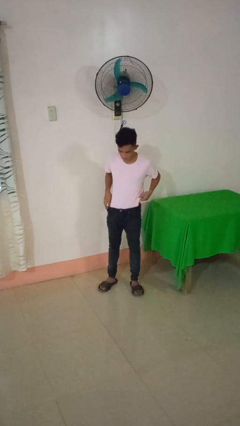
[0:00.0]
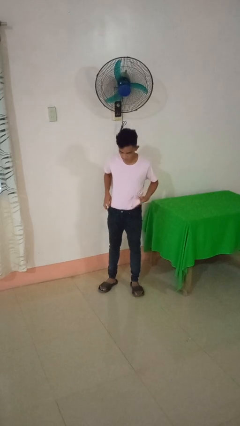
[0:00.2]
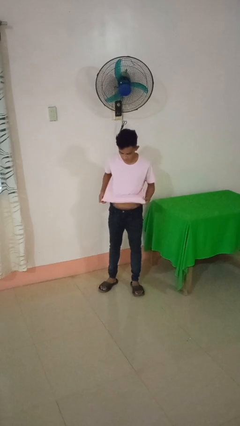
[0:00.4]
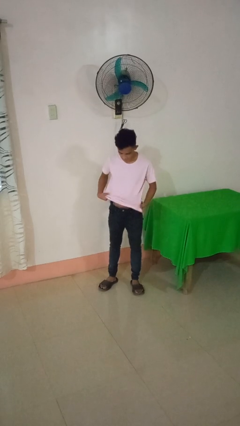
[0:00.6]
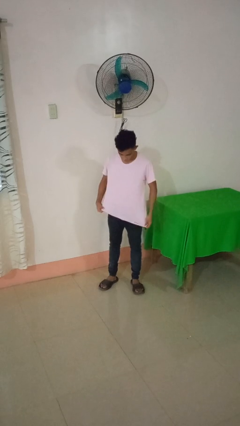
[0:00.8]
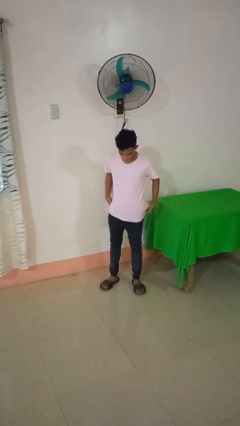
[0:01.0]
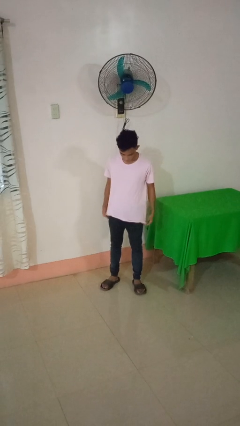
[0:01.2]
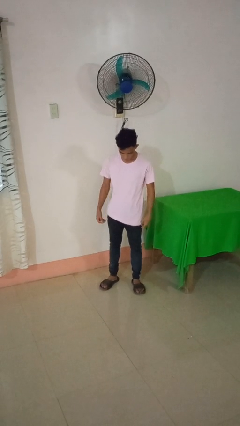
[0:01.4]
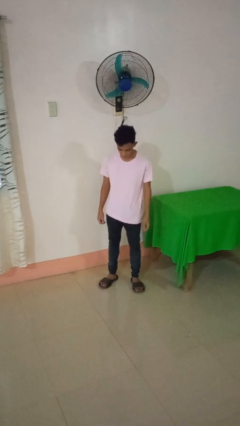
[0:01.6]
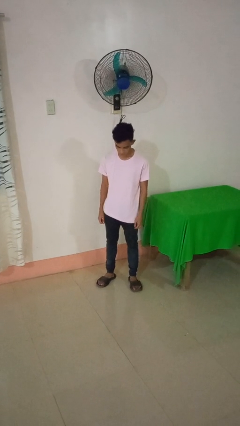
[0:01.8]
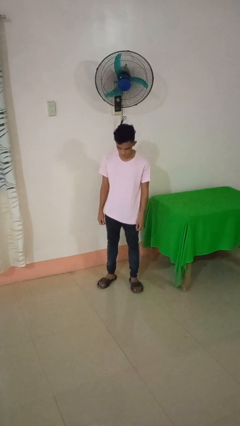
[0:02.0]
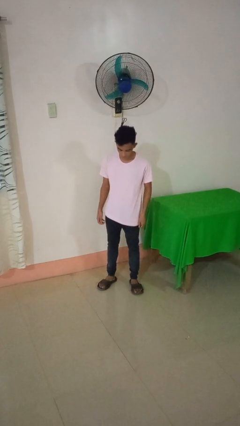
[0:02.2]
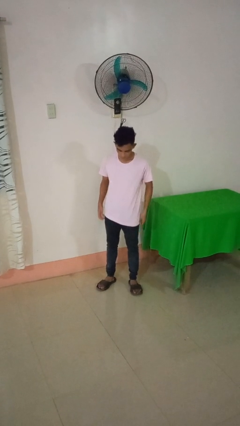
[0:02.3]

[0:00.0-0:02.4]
person untucks shirt

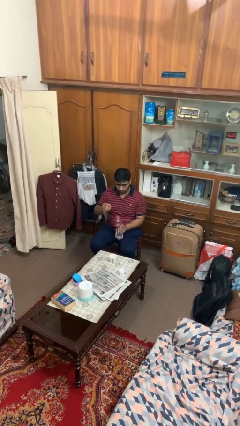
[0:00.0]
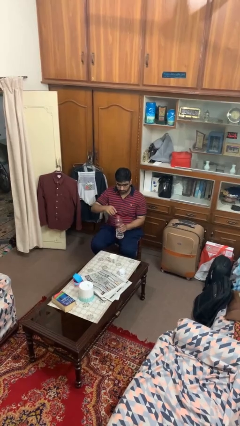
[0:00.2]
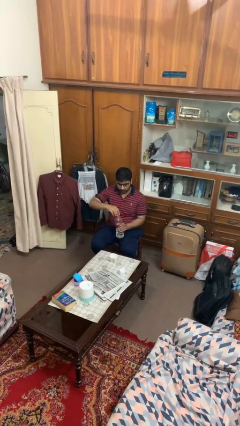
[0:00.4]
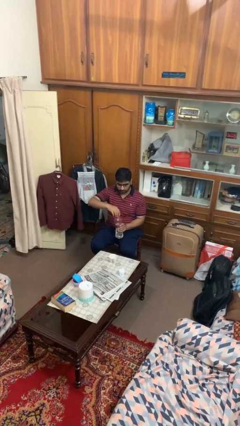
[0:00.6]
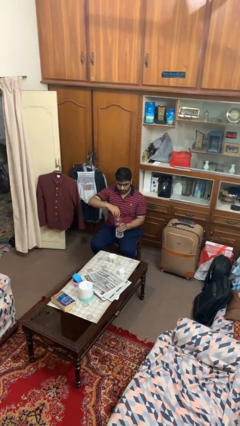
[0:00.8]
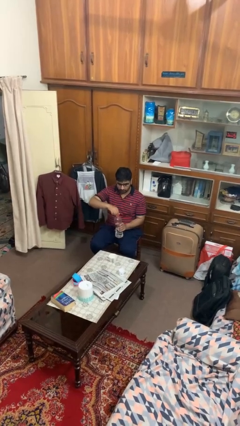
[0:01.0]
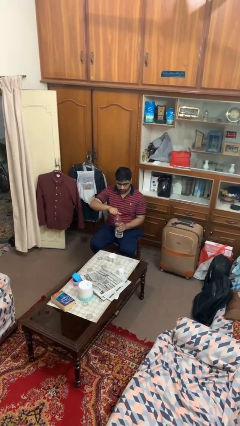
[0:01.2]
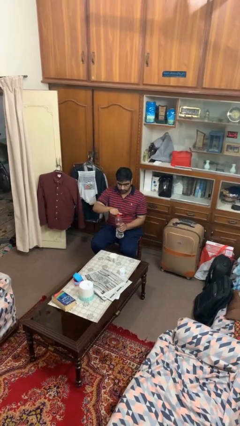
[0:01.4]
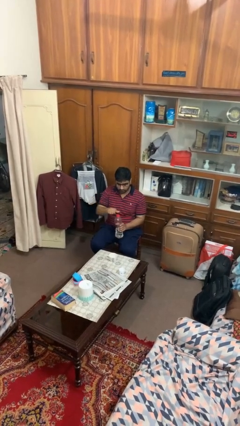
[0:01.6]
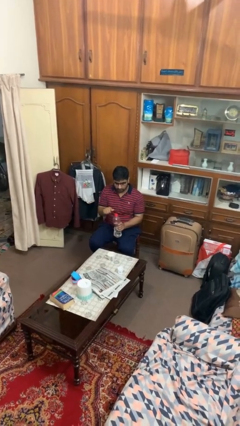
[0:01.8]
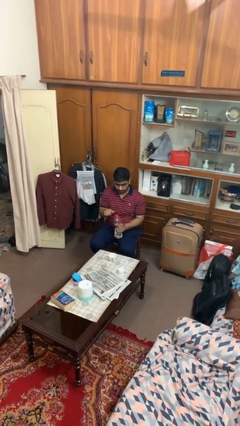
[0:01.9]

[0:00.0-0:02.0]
person screws lid to bottle

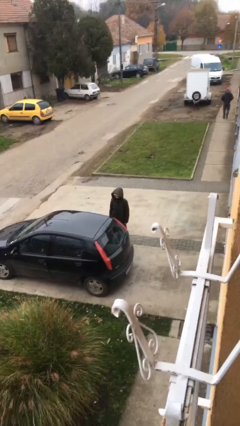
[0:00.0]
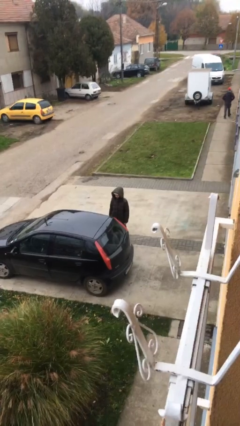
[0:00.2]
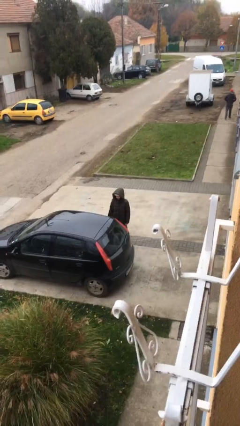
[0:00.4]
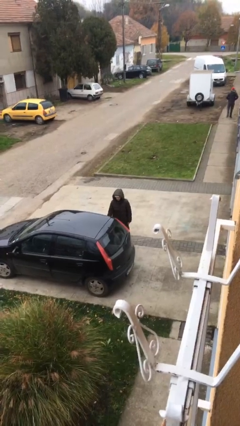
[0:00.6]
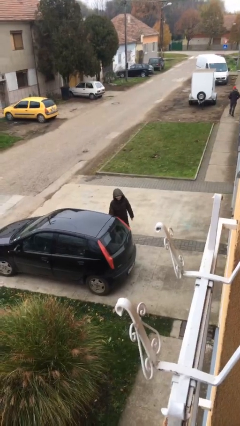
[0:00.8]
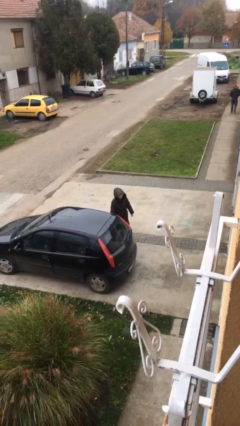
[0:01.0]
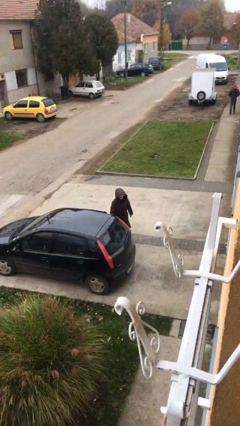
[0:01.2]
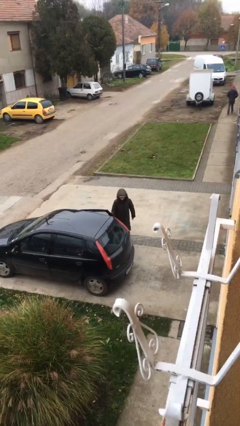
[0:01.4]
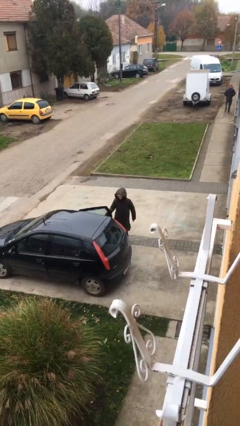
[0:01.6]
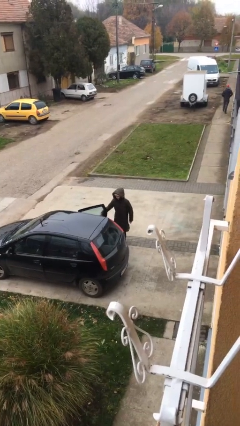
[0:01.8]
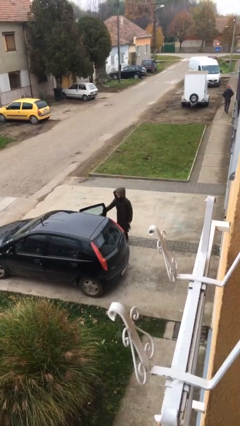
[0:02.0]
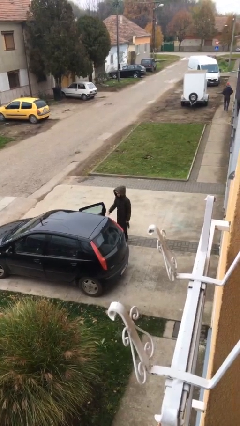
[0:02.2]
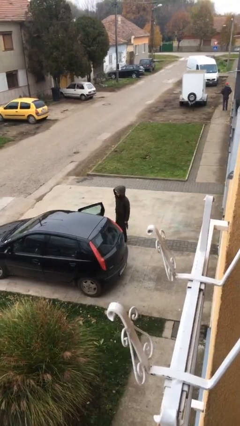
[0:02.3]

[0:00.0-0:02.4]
person opens car door

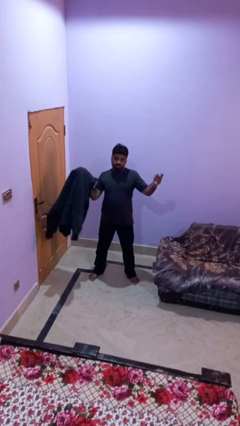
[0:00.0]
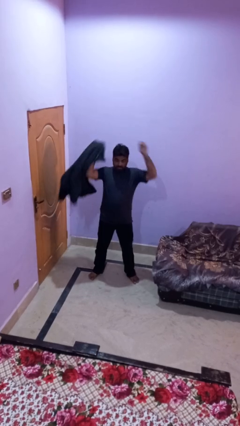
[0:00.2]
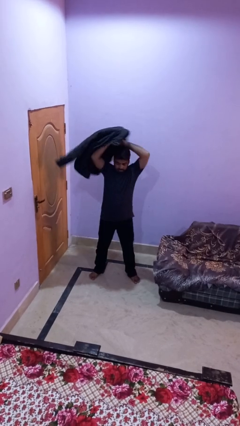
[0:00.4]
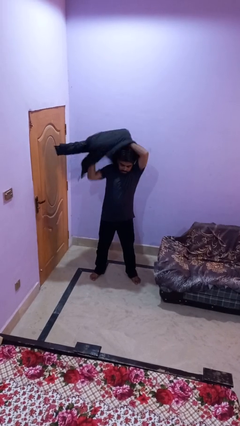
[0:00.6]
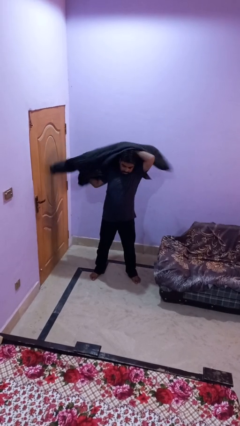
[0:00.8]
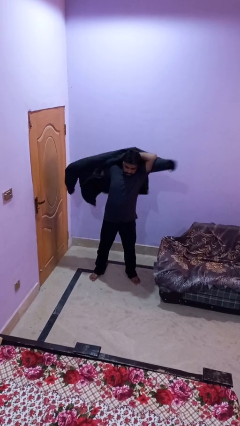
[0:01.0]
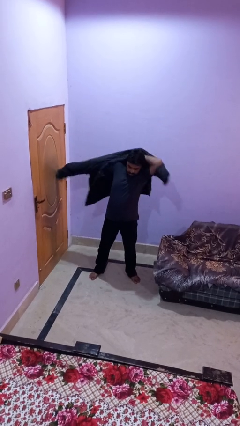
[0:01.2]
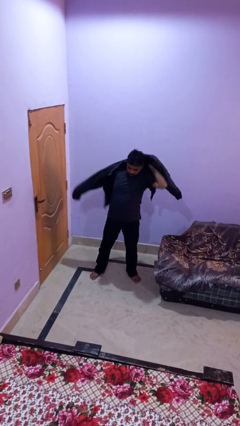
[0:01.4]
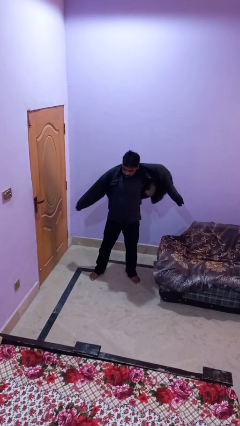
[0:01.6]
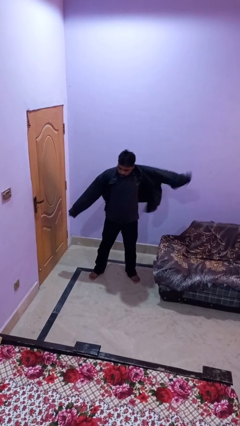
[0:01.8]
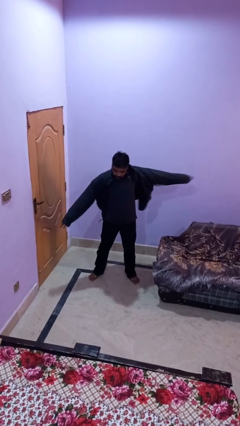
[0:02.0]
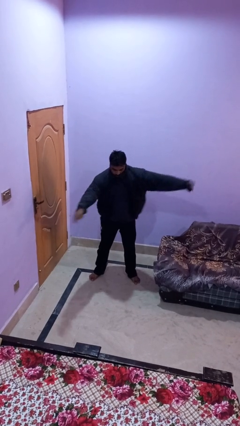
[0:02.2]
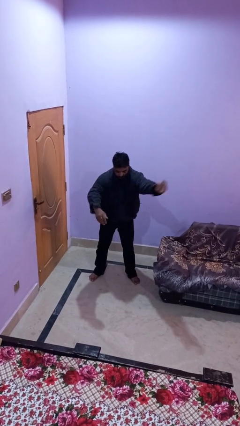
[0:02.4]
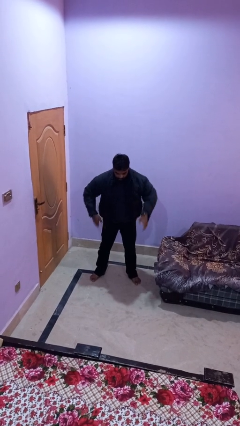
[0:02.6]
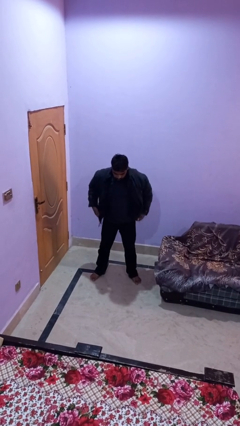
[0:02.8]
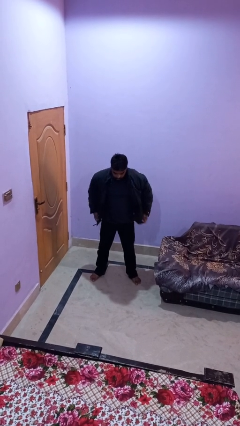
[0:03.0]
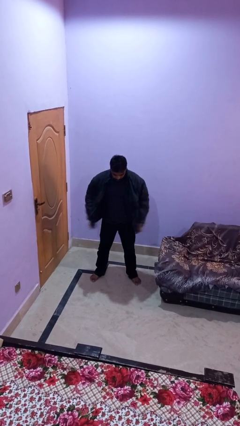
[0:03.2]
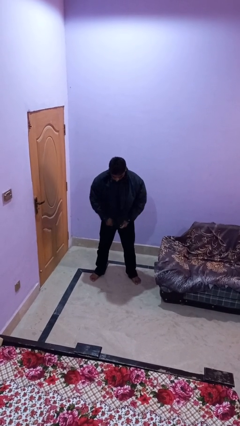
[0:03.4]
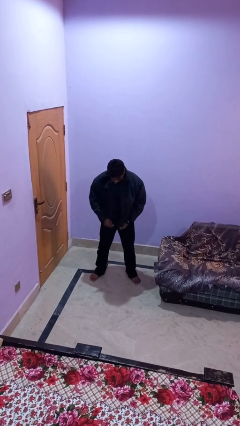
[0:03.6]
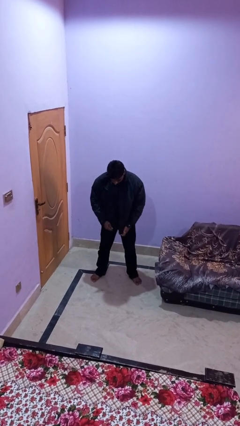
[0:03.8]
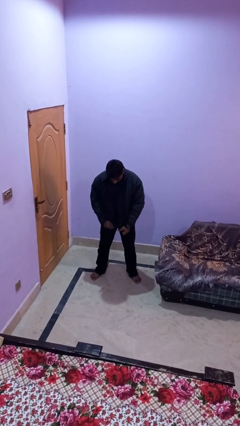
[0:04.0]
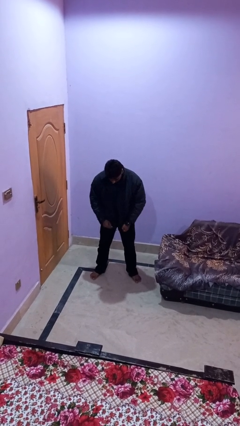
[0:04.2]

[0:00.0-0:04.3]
person puts on jacket

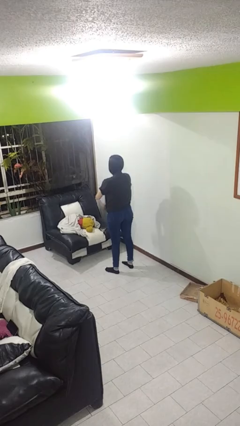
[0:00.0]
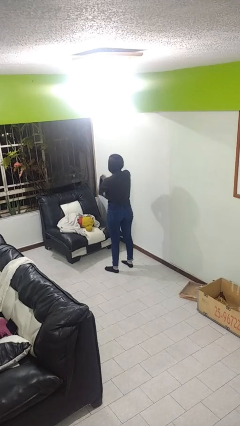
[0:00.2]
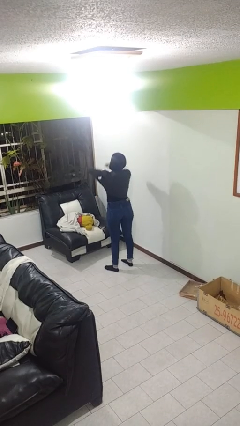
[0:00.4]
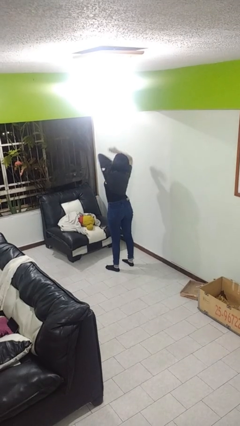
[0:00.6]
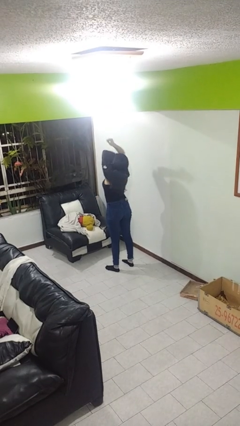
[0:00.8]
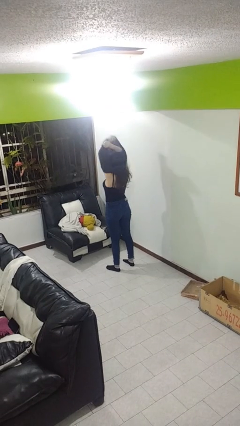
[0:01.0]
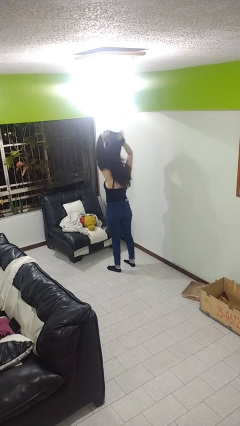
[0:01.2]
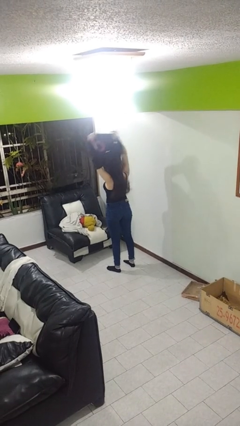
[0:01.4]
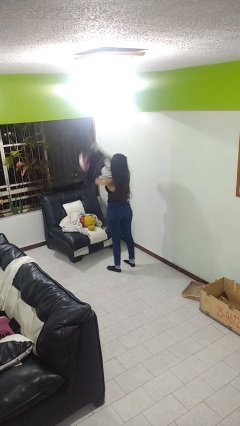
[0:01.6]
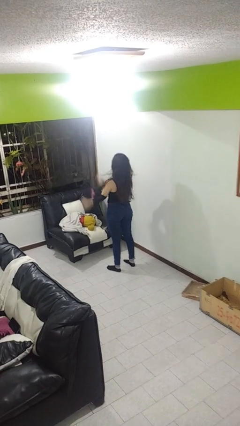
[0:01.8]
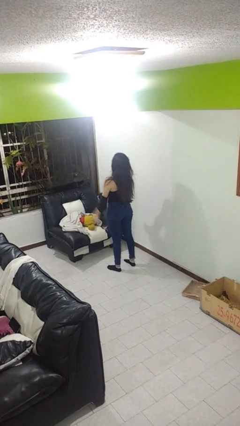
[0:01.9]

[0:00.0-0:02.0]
person takes off shirt

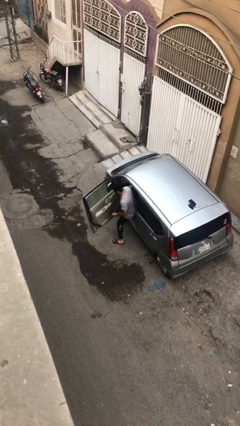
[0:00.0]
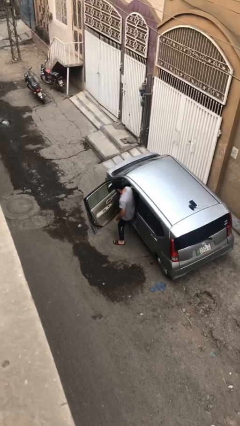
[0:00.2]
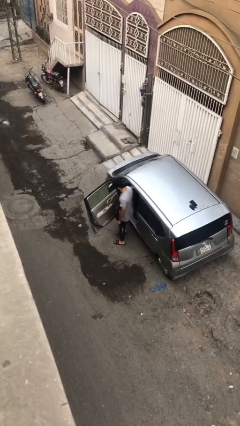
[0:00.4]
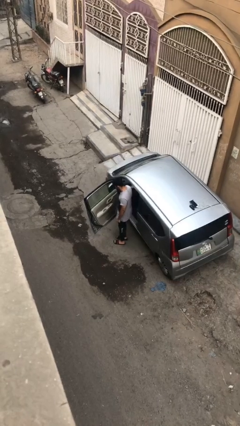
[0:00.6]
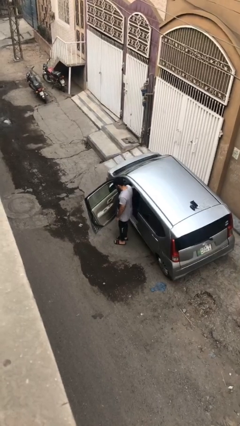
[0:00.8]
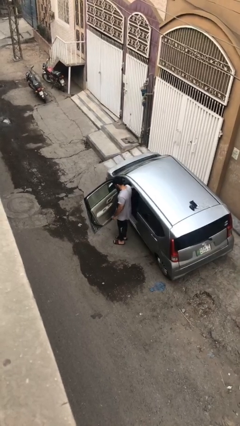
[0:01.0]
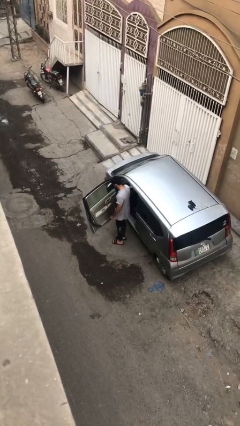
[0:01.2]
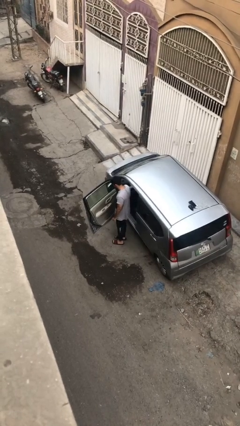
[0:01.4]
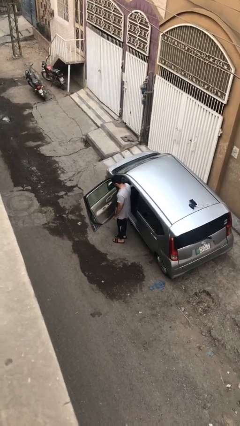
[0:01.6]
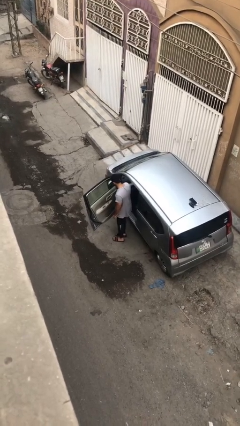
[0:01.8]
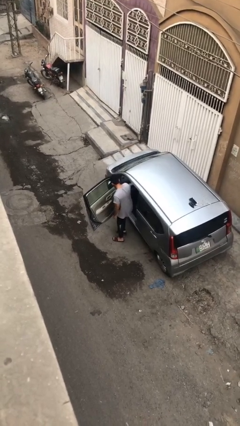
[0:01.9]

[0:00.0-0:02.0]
person exits car

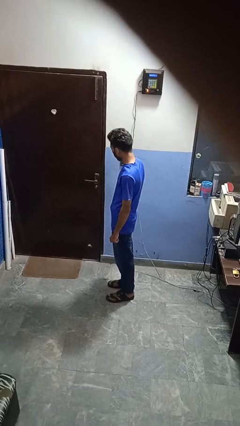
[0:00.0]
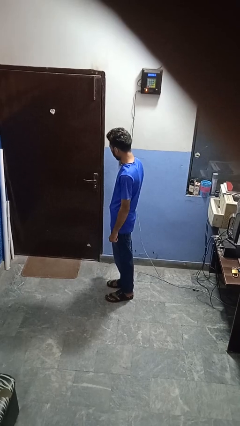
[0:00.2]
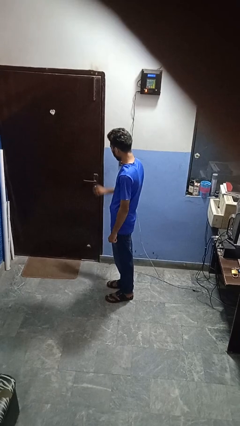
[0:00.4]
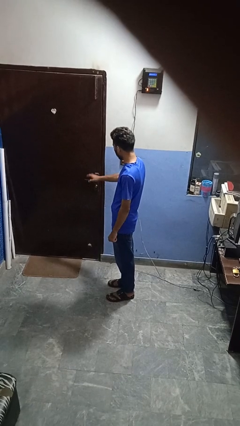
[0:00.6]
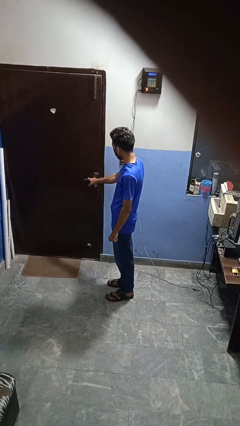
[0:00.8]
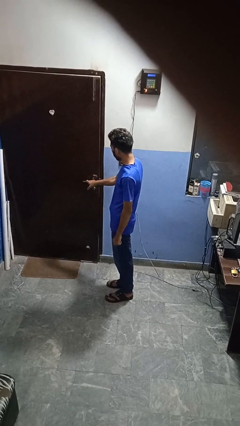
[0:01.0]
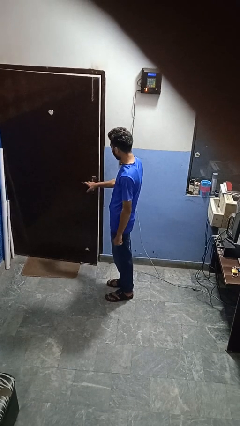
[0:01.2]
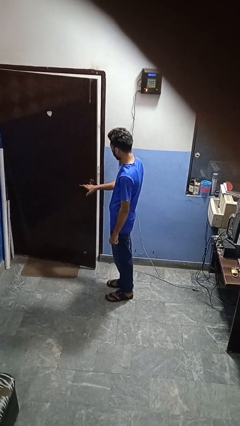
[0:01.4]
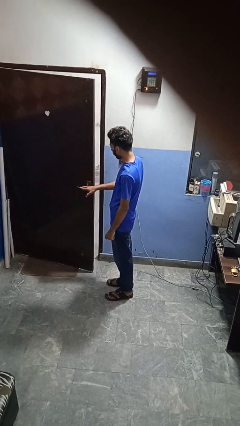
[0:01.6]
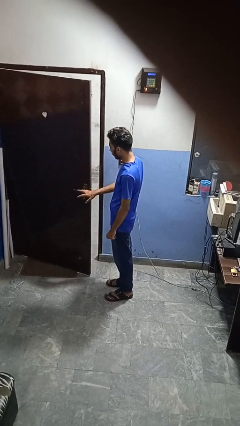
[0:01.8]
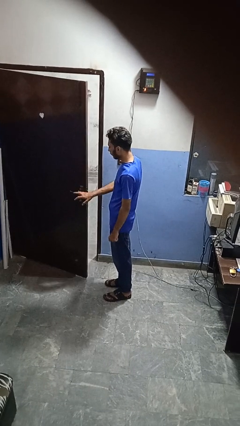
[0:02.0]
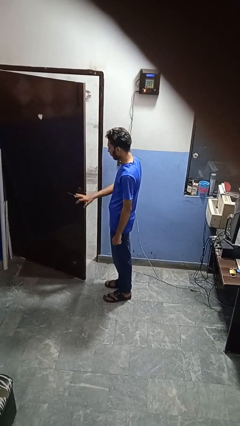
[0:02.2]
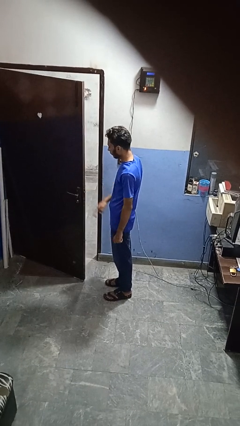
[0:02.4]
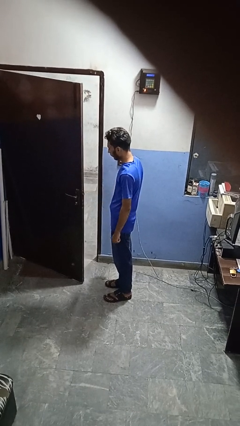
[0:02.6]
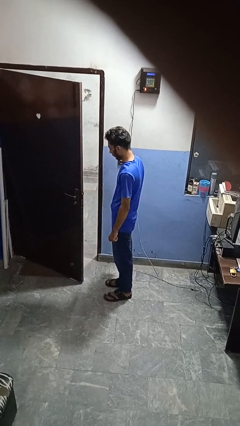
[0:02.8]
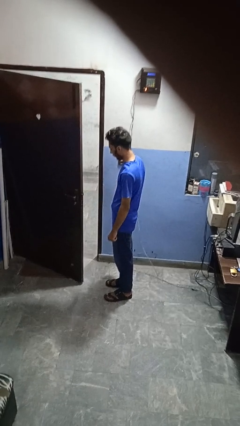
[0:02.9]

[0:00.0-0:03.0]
person opens facility door
